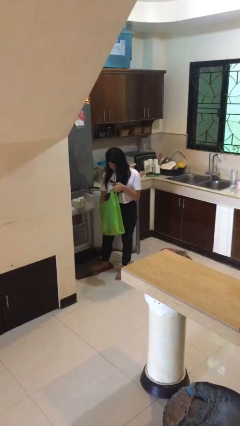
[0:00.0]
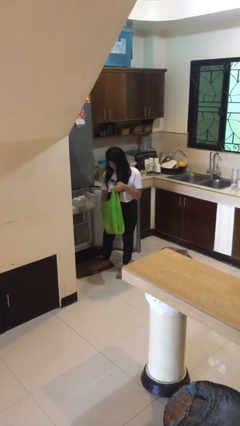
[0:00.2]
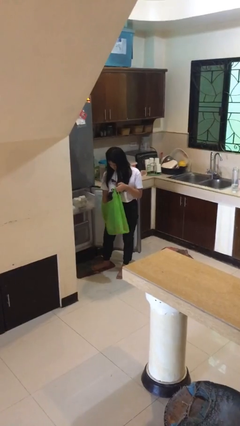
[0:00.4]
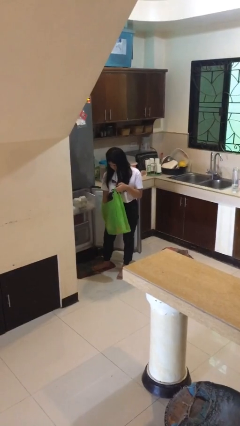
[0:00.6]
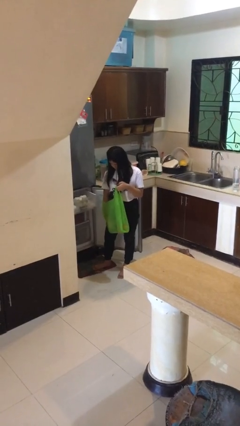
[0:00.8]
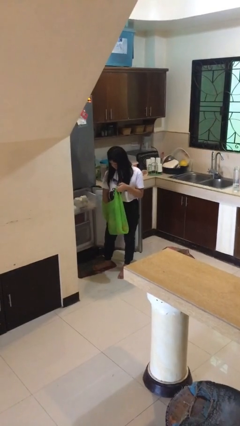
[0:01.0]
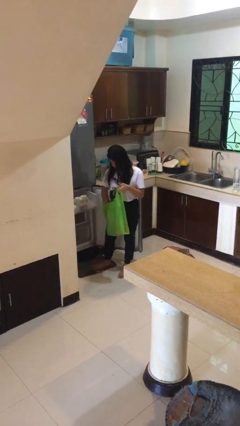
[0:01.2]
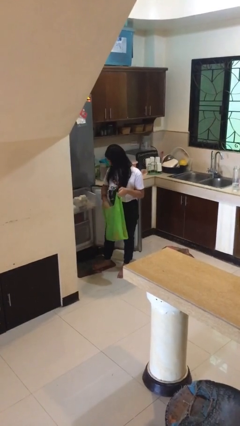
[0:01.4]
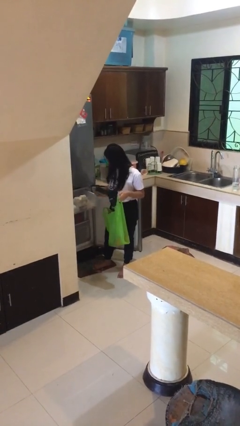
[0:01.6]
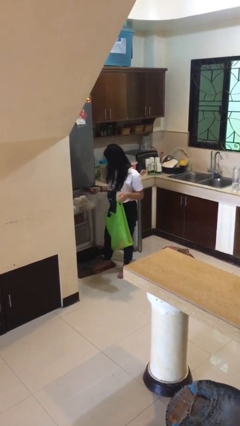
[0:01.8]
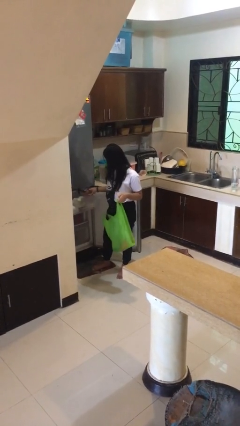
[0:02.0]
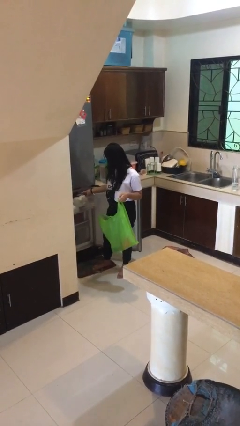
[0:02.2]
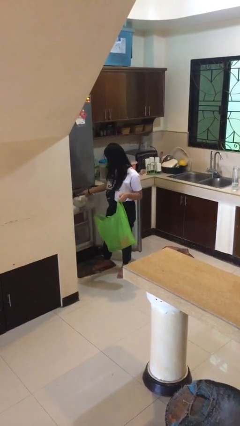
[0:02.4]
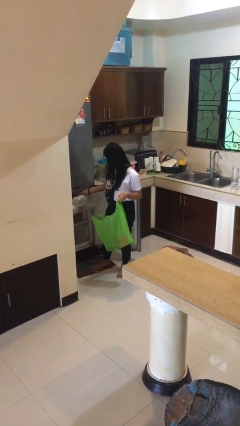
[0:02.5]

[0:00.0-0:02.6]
person loads groceries into refrigerator

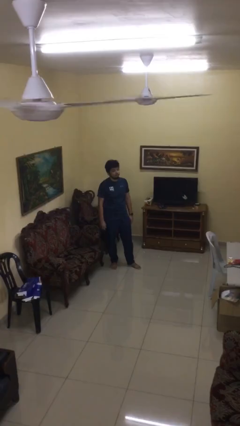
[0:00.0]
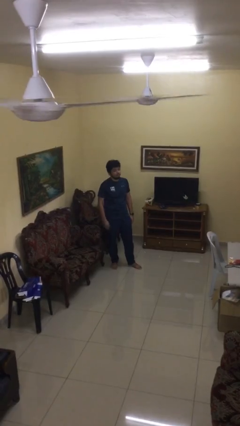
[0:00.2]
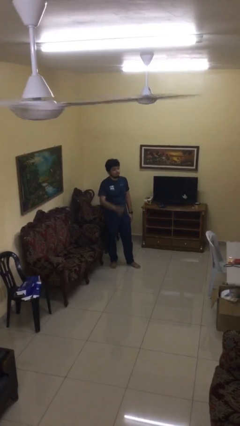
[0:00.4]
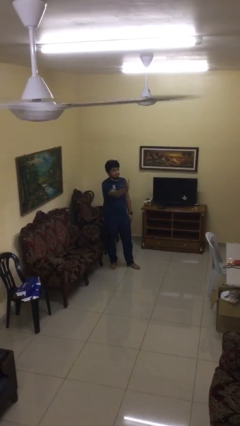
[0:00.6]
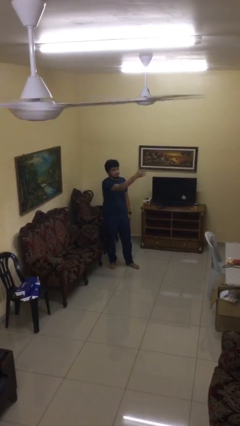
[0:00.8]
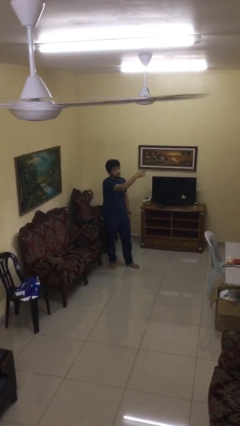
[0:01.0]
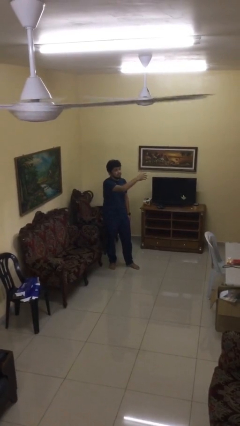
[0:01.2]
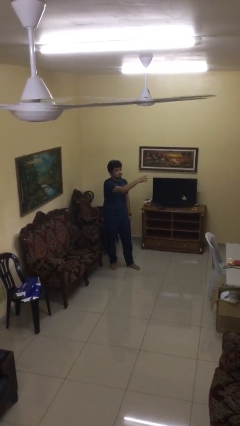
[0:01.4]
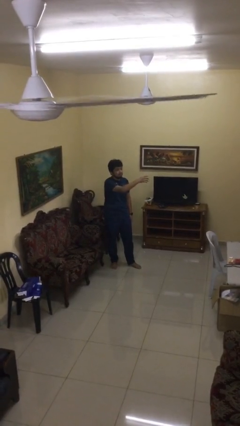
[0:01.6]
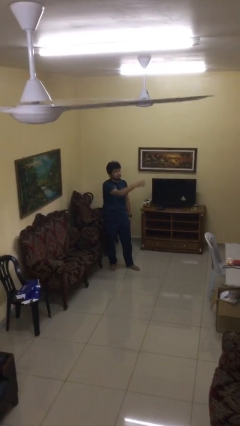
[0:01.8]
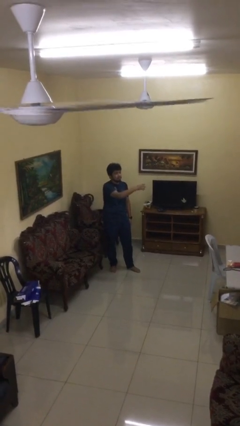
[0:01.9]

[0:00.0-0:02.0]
person gestures swipe left

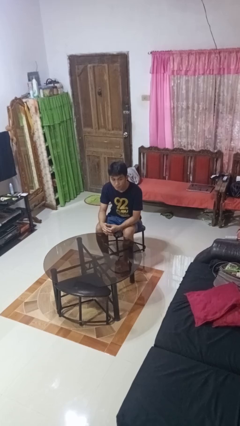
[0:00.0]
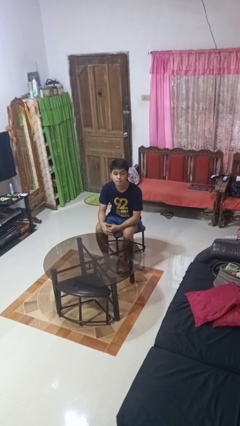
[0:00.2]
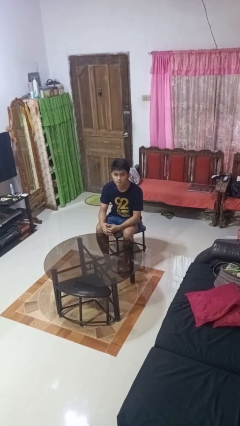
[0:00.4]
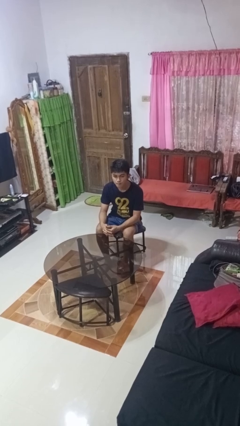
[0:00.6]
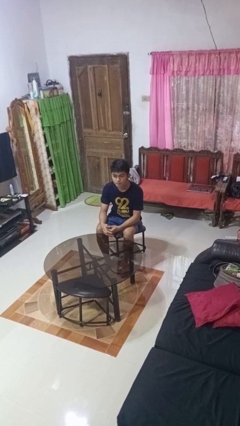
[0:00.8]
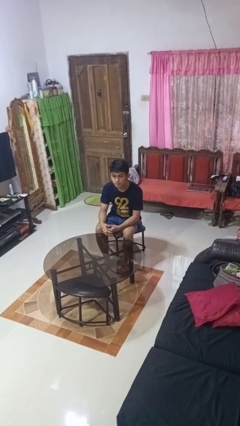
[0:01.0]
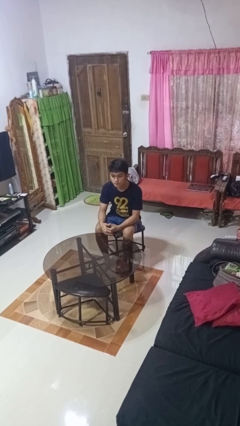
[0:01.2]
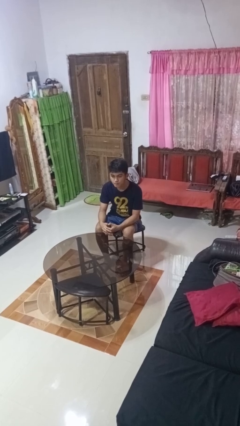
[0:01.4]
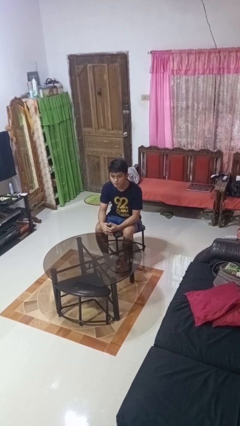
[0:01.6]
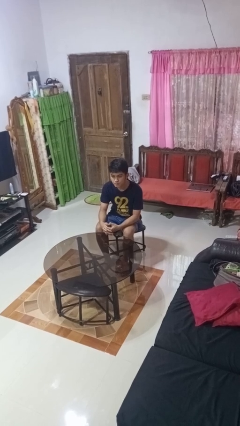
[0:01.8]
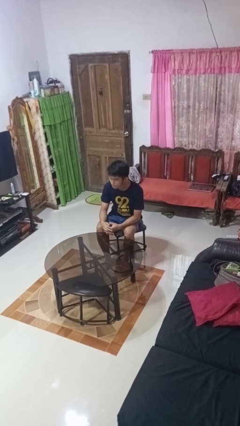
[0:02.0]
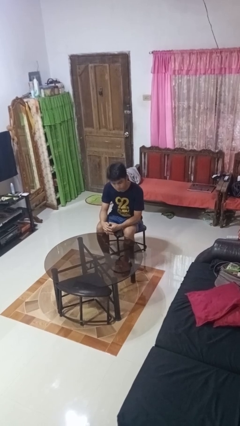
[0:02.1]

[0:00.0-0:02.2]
person nods head

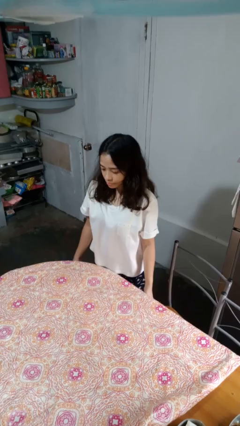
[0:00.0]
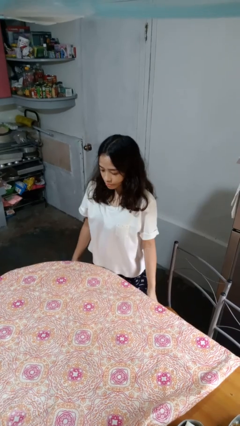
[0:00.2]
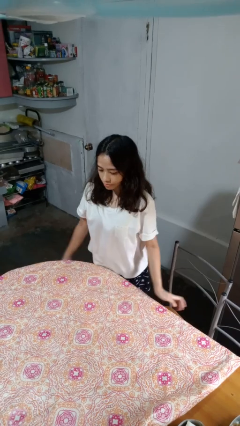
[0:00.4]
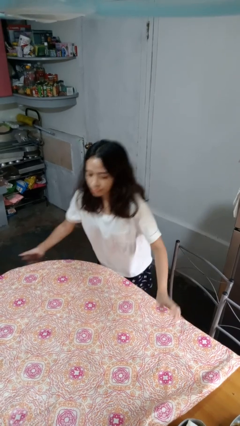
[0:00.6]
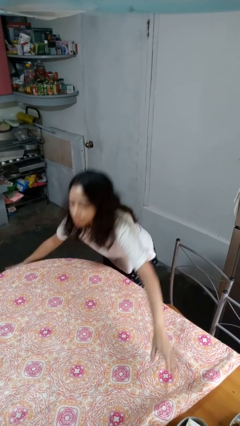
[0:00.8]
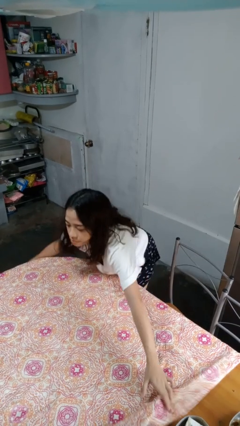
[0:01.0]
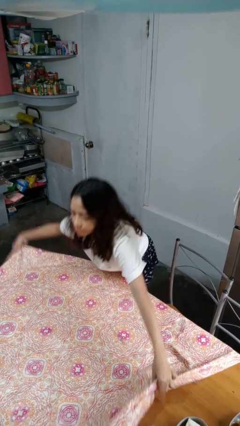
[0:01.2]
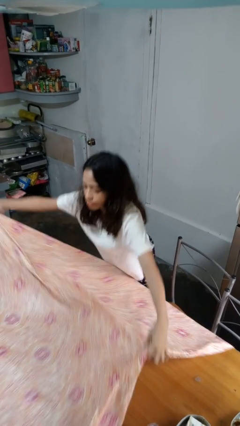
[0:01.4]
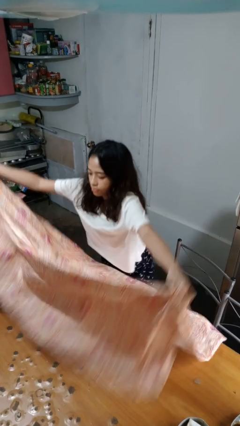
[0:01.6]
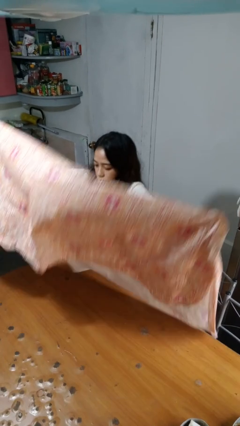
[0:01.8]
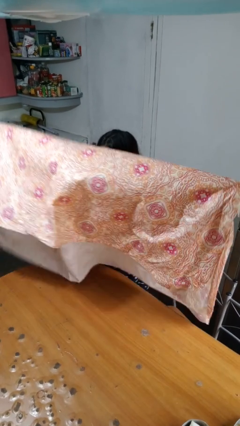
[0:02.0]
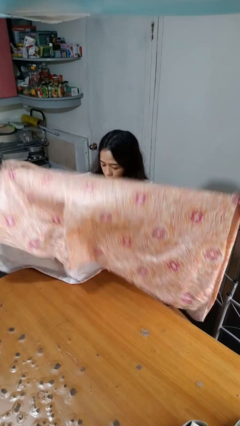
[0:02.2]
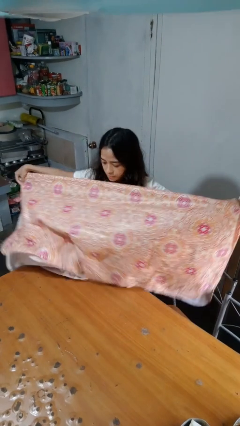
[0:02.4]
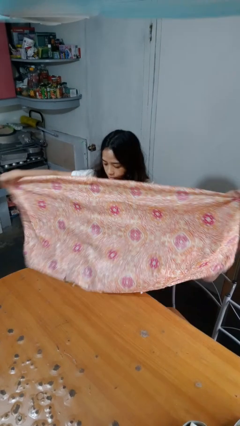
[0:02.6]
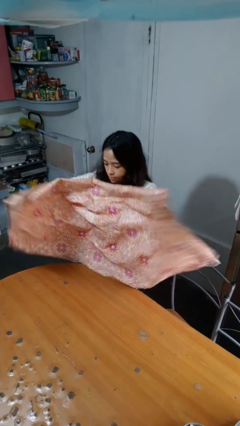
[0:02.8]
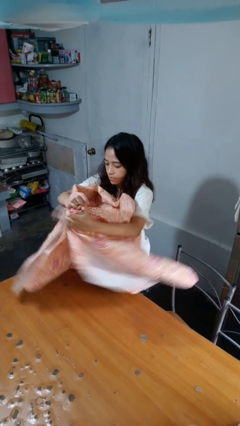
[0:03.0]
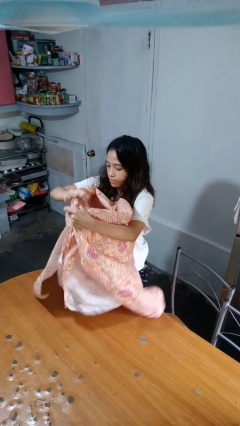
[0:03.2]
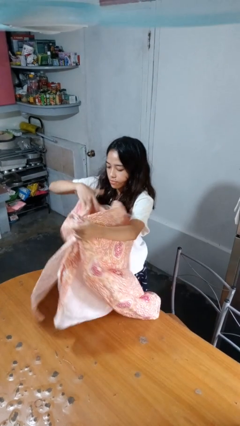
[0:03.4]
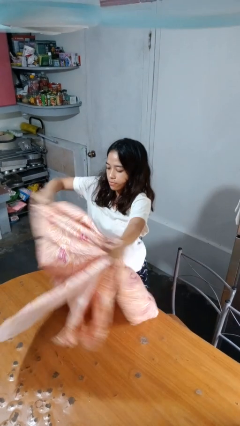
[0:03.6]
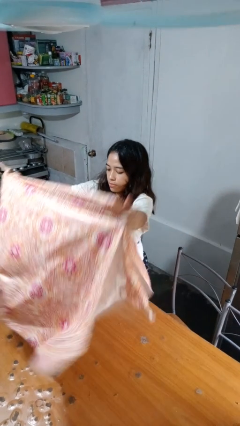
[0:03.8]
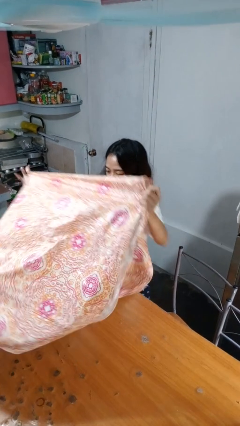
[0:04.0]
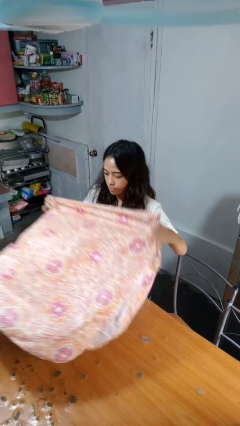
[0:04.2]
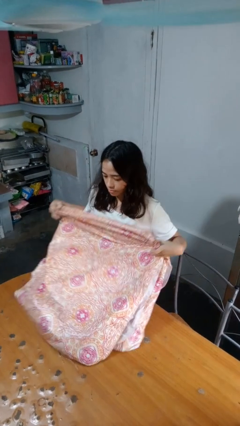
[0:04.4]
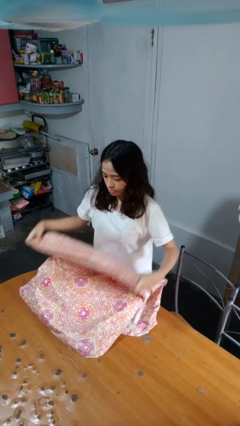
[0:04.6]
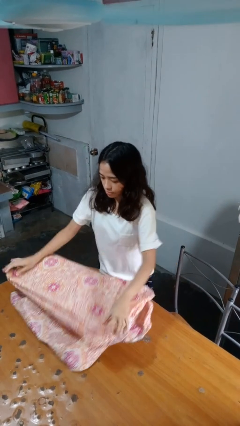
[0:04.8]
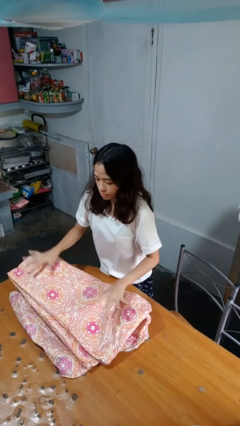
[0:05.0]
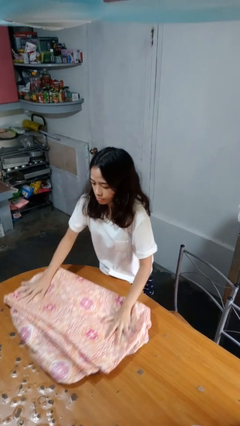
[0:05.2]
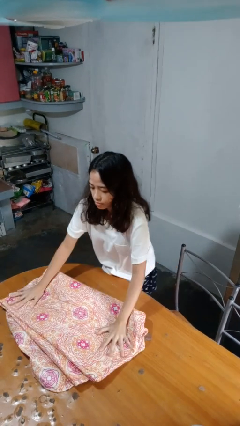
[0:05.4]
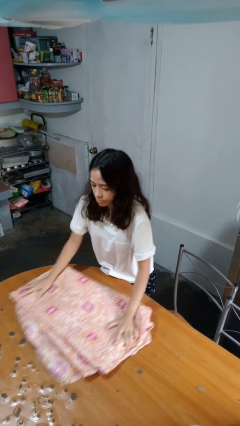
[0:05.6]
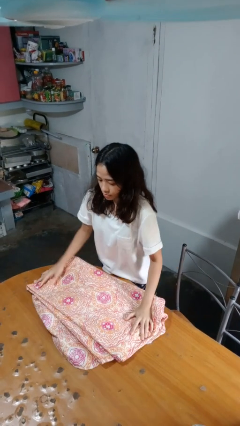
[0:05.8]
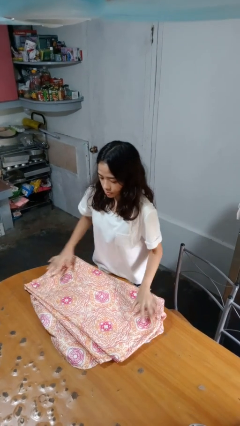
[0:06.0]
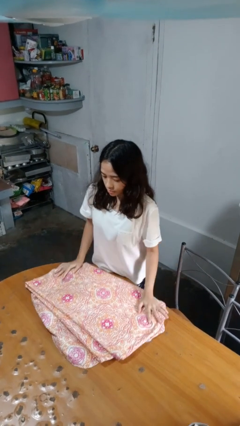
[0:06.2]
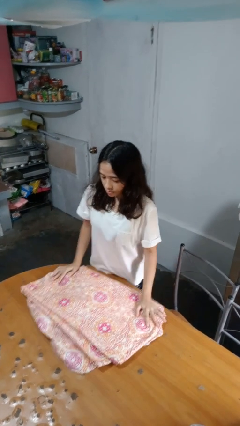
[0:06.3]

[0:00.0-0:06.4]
person folds tablecloth

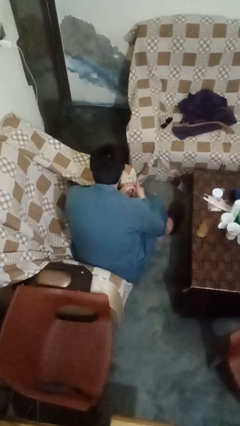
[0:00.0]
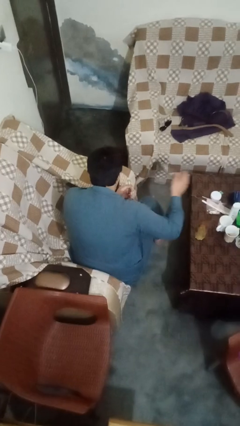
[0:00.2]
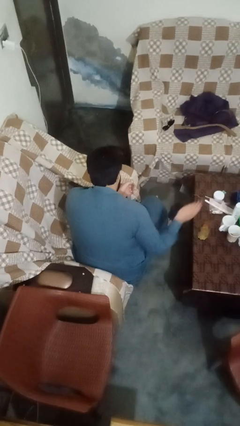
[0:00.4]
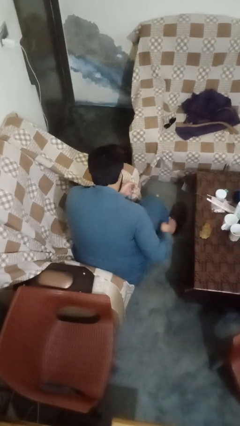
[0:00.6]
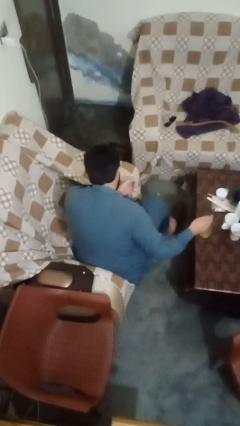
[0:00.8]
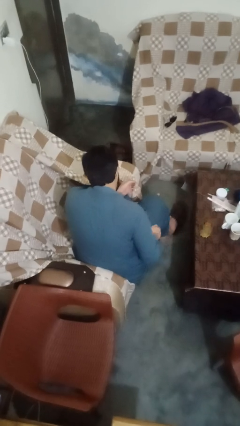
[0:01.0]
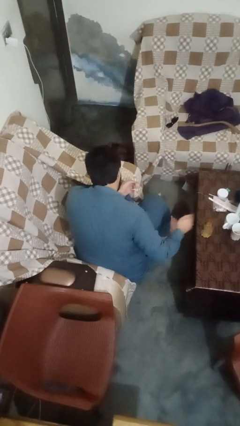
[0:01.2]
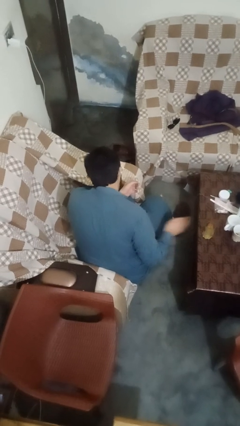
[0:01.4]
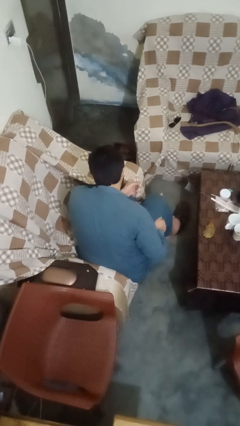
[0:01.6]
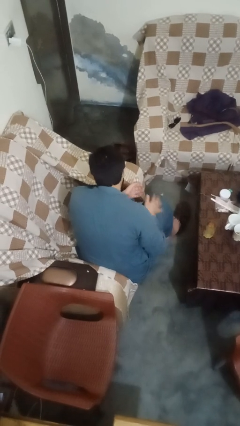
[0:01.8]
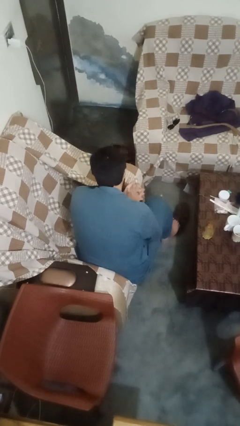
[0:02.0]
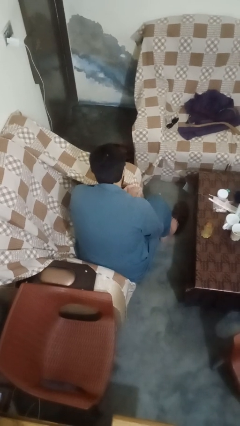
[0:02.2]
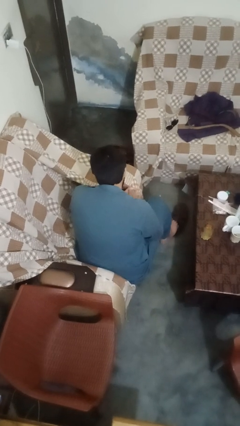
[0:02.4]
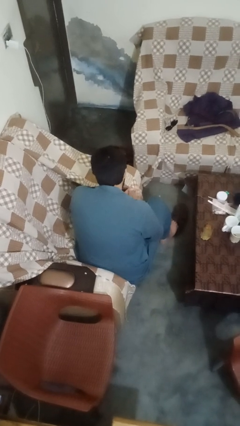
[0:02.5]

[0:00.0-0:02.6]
person slaps hands on thighs

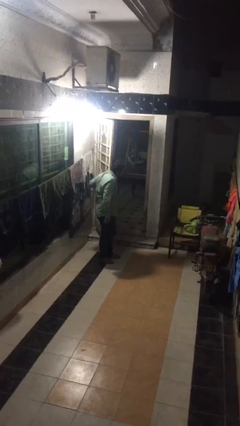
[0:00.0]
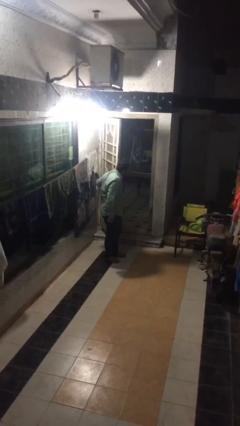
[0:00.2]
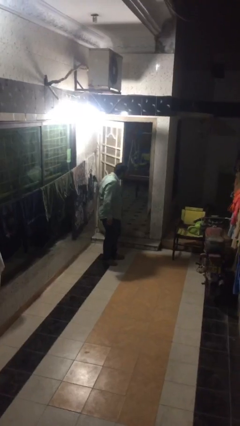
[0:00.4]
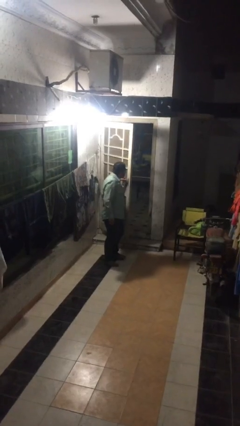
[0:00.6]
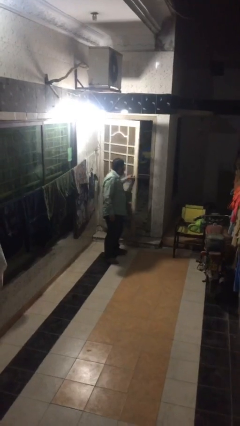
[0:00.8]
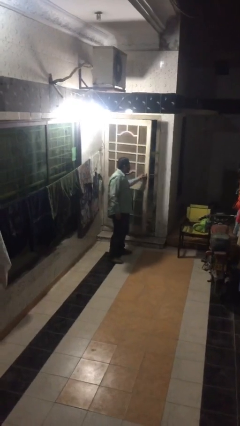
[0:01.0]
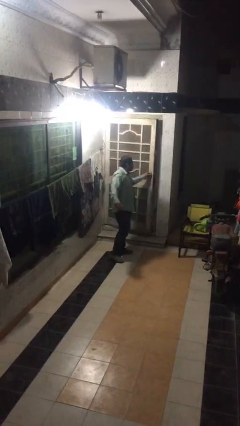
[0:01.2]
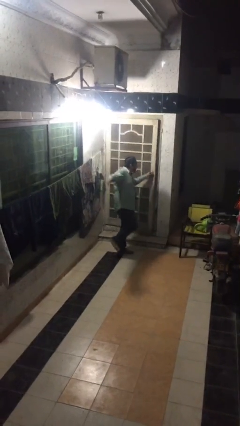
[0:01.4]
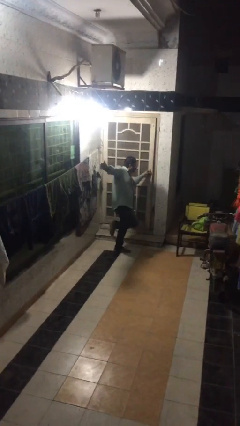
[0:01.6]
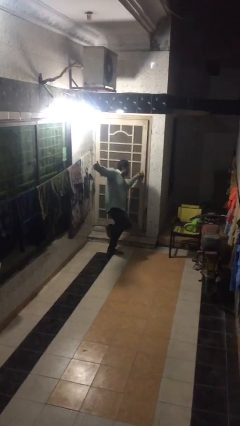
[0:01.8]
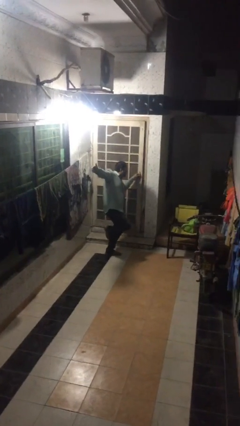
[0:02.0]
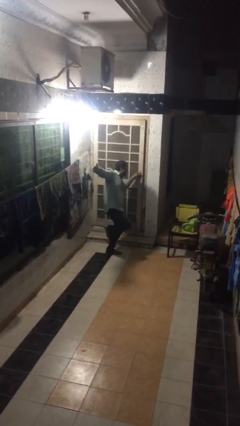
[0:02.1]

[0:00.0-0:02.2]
person closes facility door
